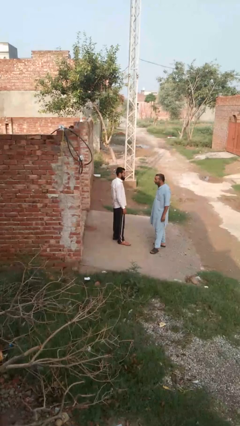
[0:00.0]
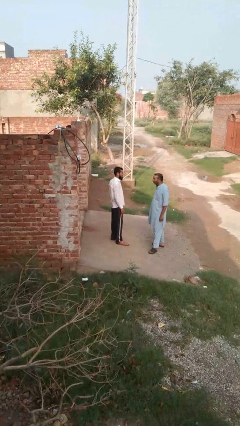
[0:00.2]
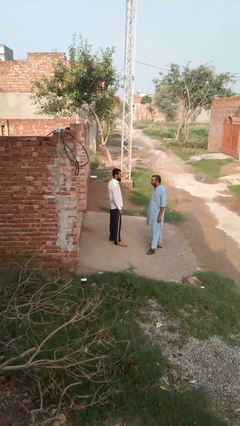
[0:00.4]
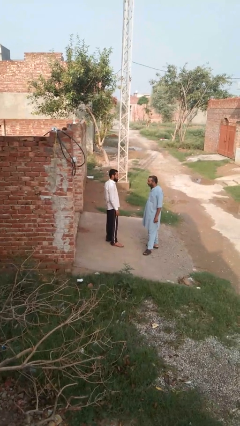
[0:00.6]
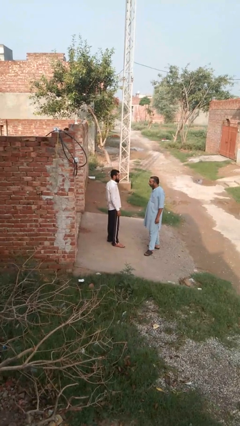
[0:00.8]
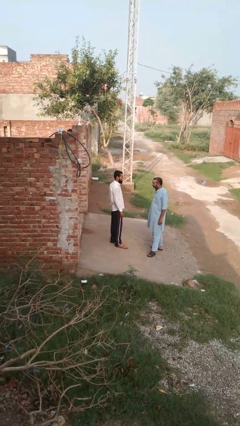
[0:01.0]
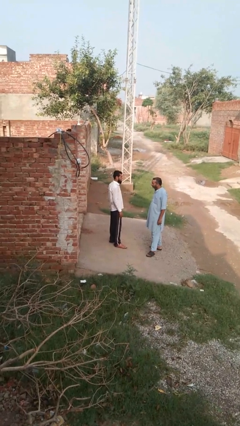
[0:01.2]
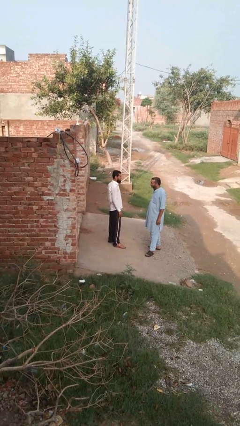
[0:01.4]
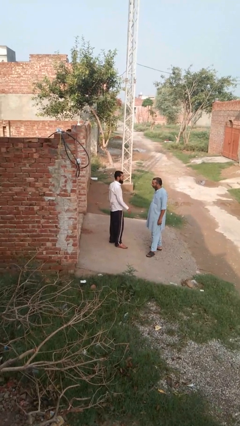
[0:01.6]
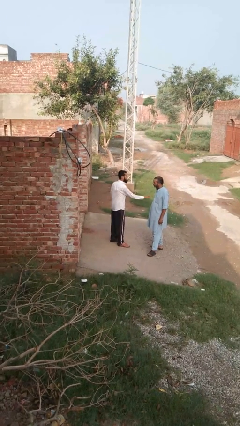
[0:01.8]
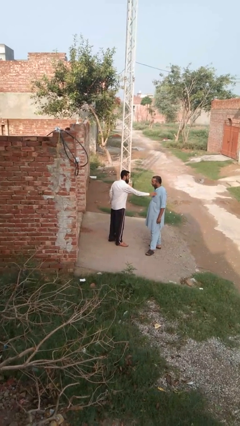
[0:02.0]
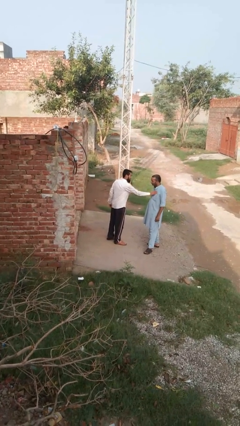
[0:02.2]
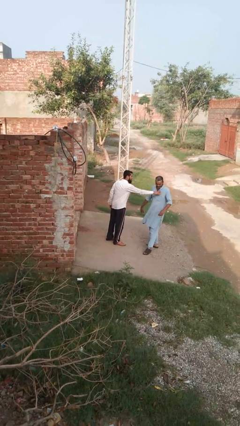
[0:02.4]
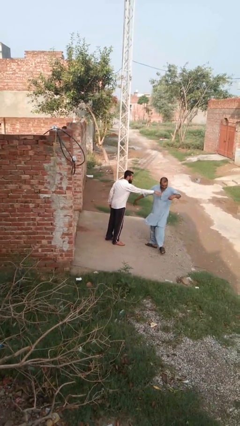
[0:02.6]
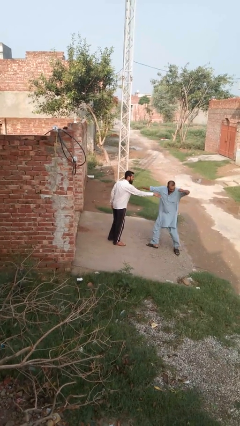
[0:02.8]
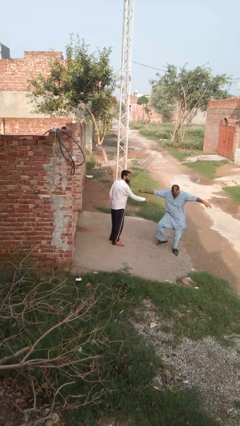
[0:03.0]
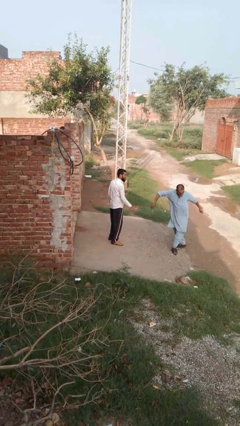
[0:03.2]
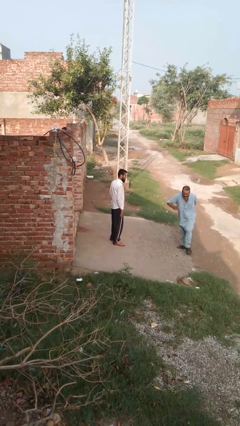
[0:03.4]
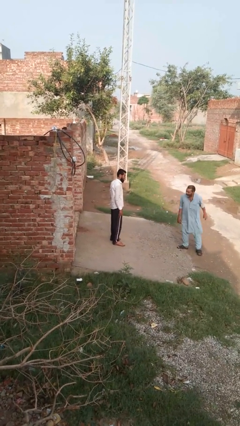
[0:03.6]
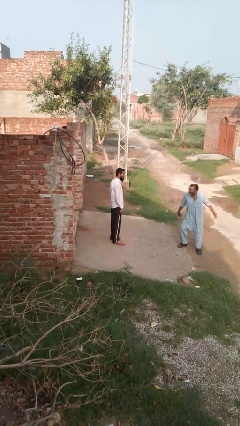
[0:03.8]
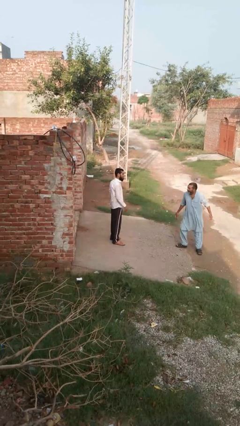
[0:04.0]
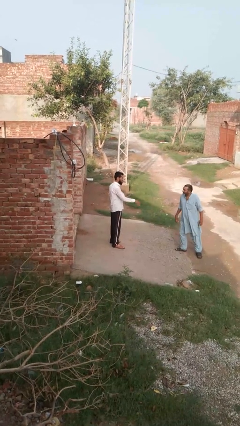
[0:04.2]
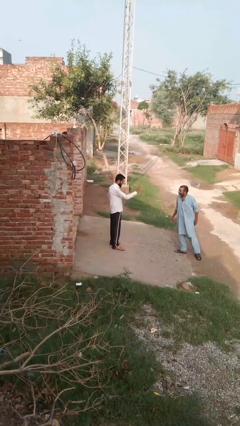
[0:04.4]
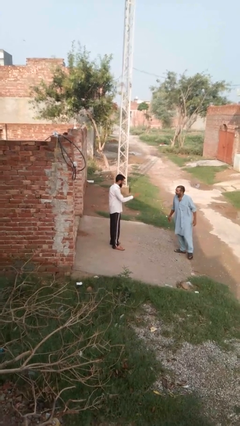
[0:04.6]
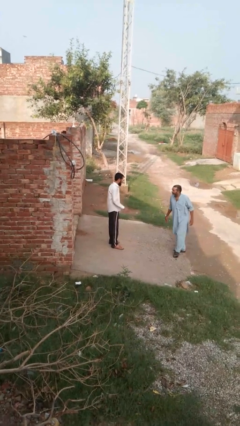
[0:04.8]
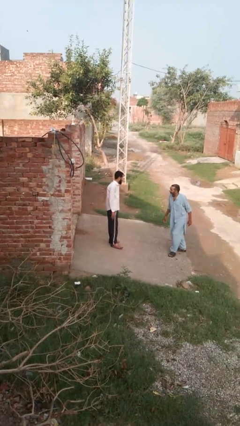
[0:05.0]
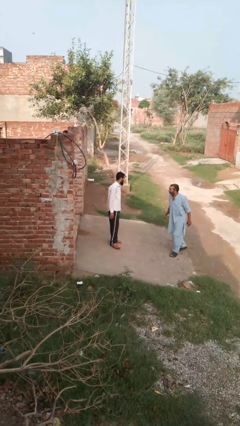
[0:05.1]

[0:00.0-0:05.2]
person shoves person

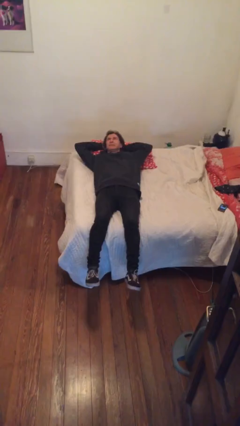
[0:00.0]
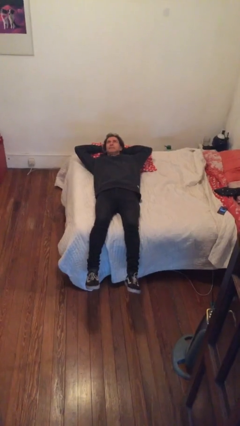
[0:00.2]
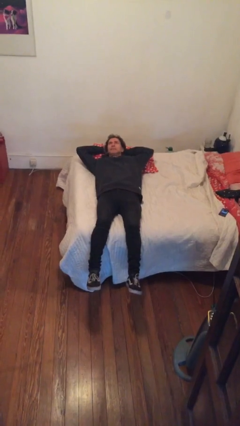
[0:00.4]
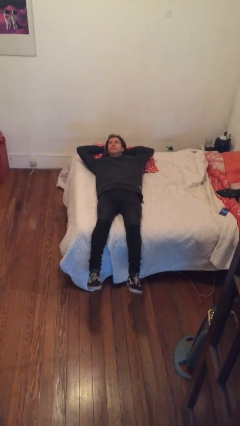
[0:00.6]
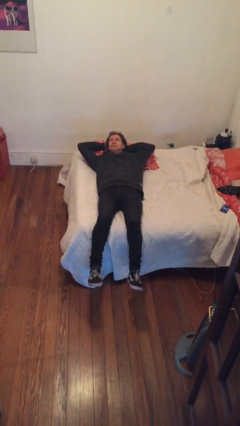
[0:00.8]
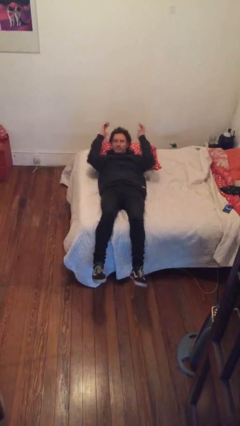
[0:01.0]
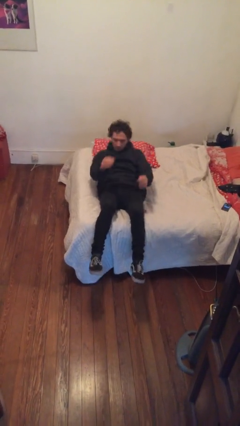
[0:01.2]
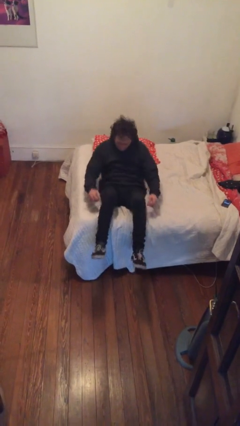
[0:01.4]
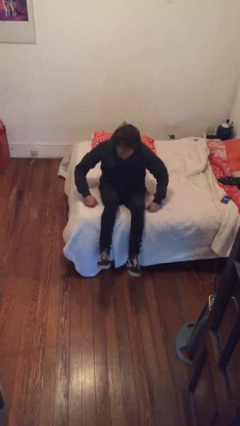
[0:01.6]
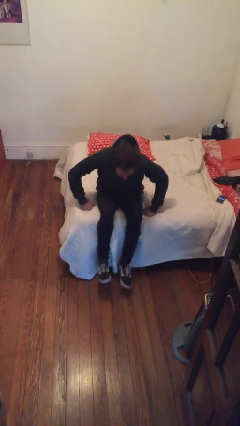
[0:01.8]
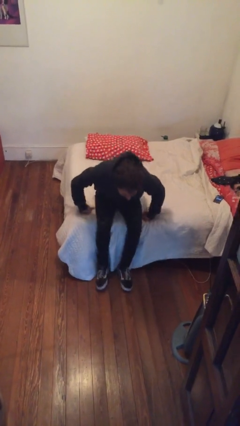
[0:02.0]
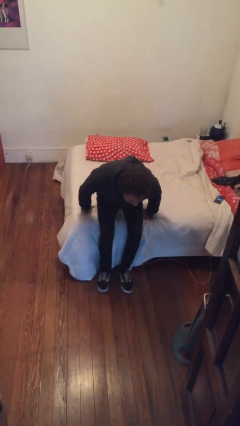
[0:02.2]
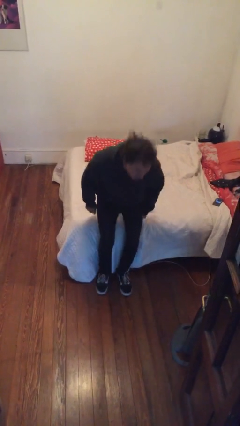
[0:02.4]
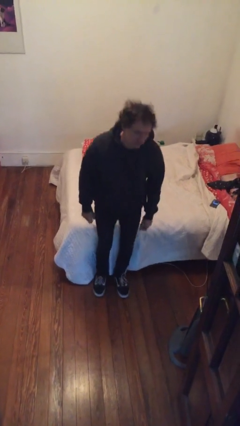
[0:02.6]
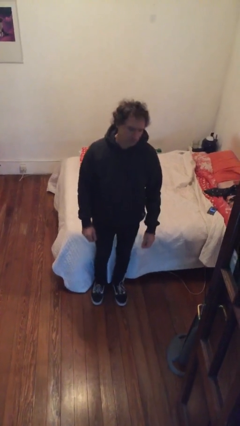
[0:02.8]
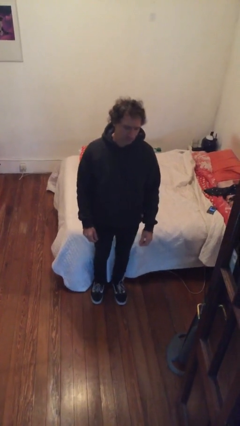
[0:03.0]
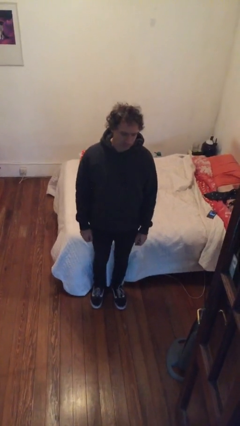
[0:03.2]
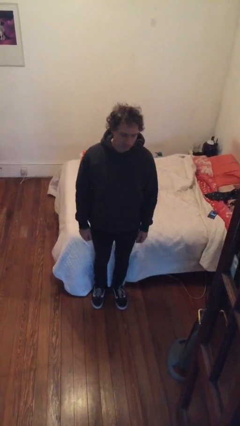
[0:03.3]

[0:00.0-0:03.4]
person stands up

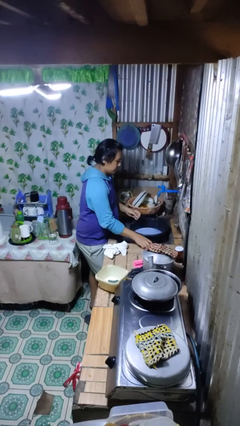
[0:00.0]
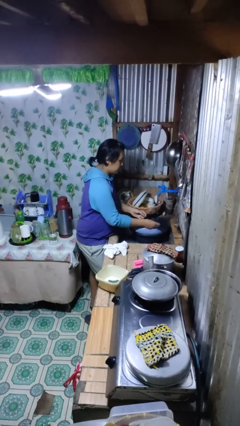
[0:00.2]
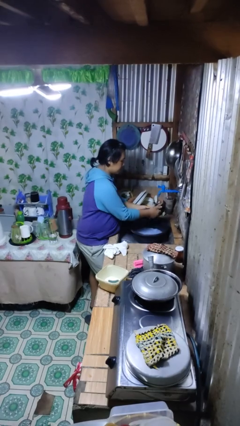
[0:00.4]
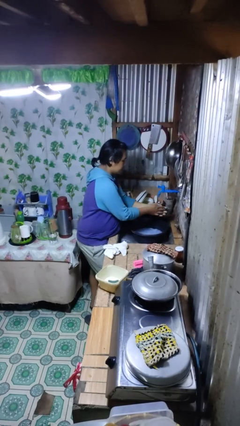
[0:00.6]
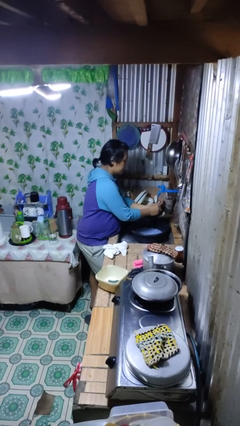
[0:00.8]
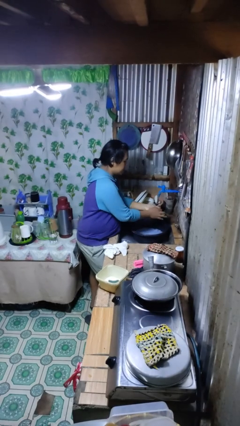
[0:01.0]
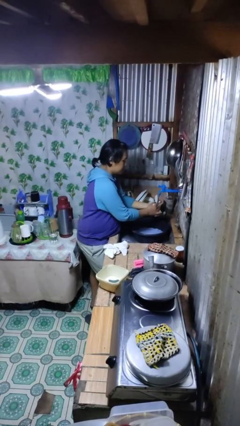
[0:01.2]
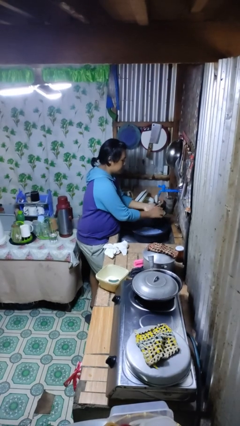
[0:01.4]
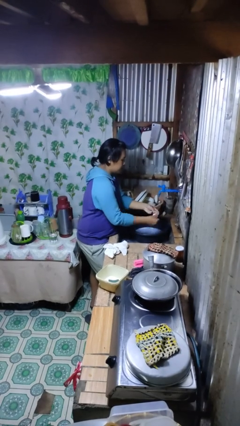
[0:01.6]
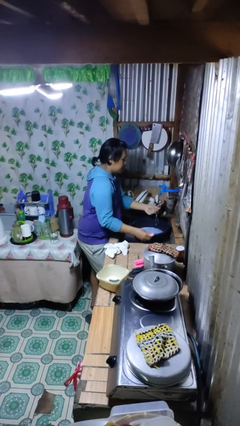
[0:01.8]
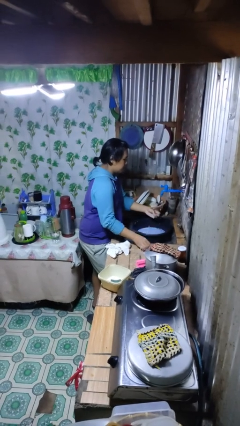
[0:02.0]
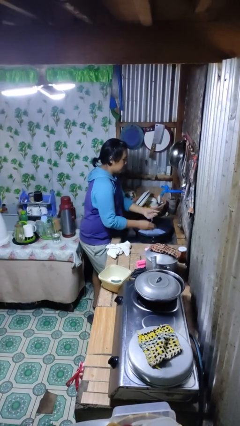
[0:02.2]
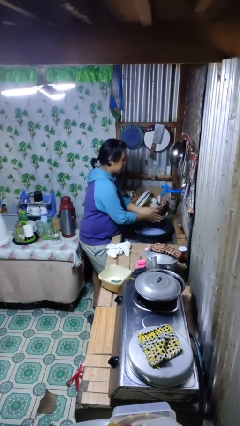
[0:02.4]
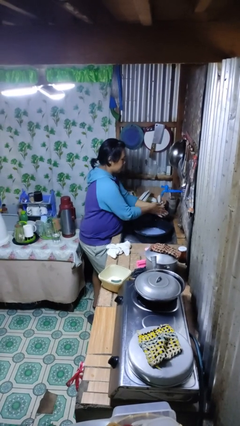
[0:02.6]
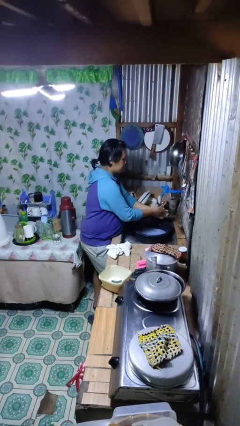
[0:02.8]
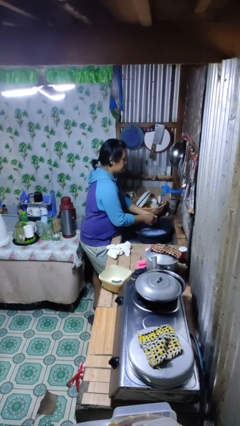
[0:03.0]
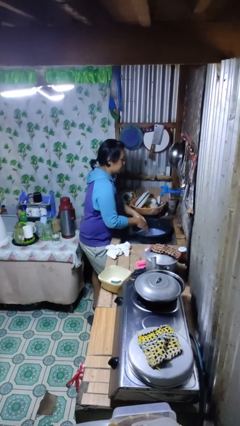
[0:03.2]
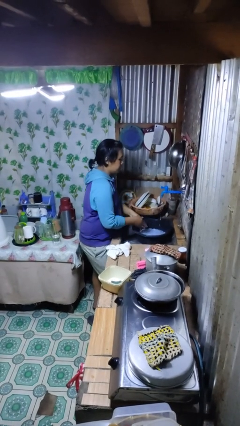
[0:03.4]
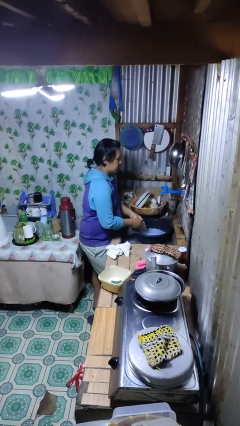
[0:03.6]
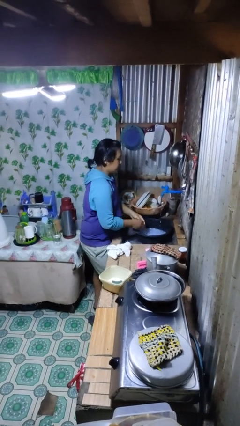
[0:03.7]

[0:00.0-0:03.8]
person washes hands

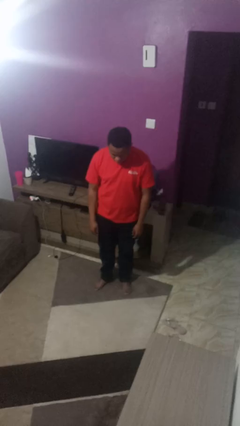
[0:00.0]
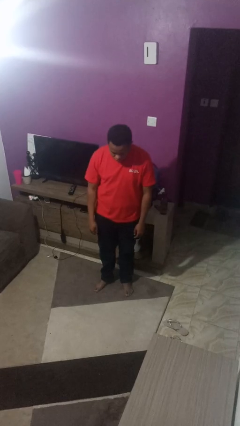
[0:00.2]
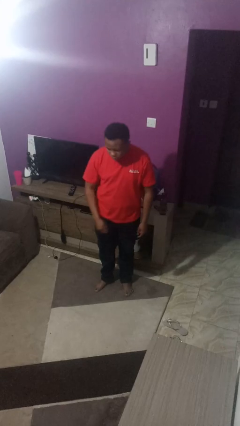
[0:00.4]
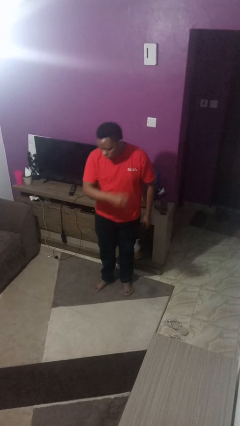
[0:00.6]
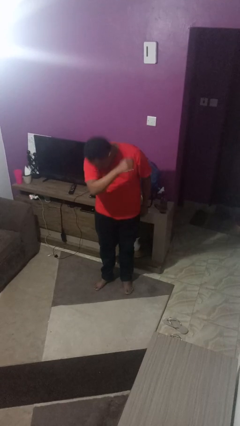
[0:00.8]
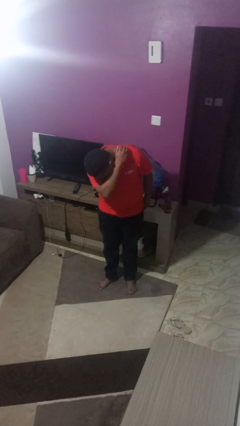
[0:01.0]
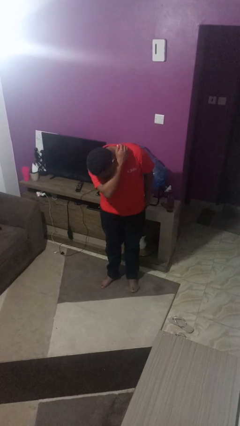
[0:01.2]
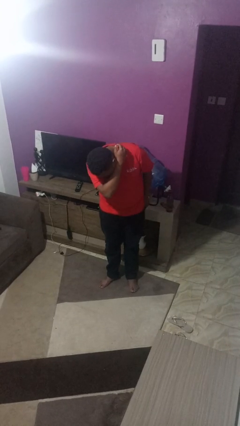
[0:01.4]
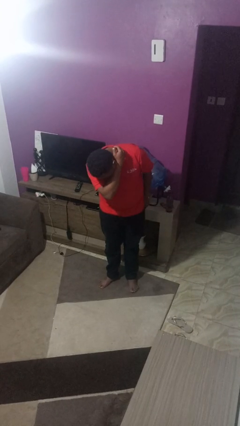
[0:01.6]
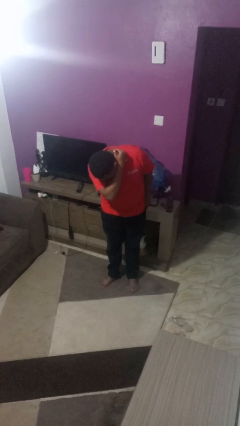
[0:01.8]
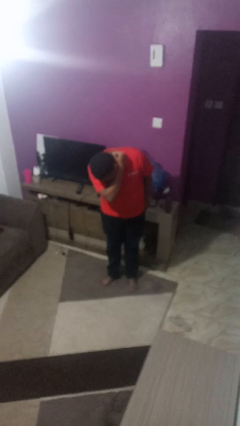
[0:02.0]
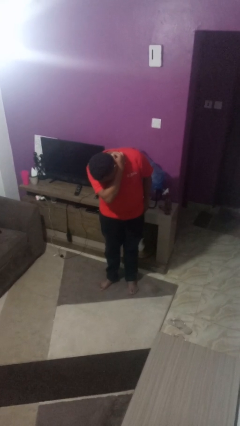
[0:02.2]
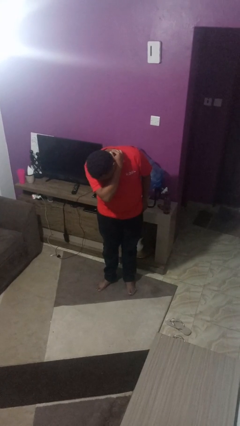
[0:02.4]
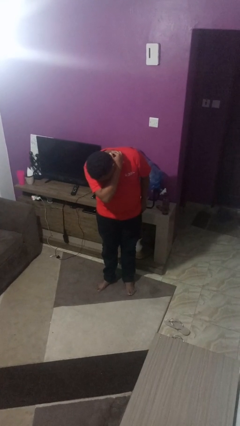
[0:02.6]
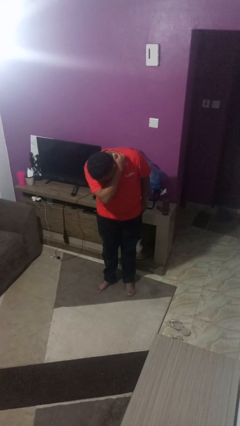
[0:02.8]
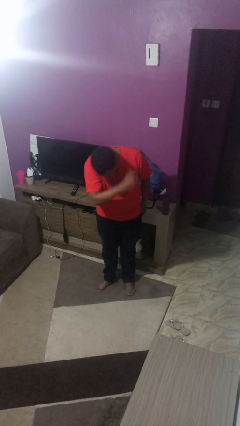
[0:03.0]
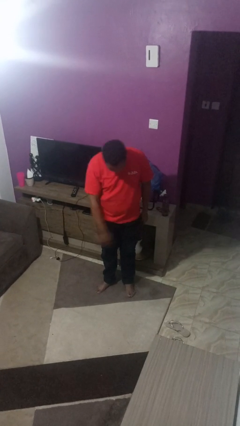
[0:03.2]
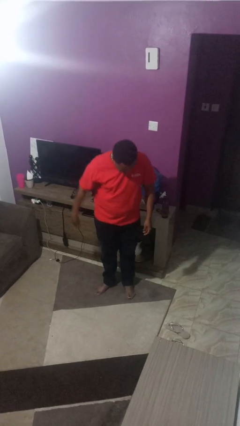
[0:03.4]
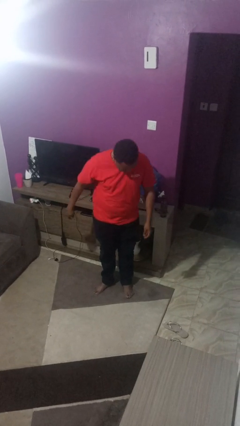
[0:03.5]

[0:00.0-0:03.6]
person sneezes into arm

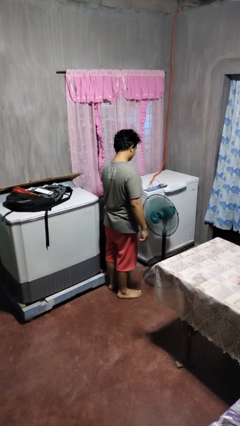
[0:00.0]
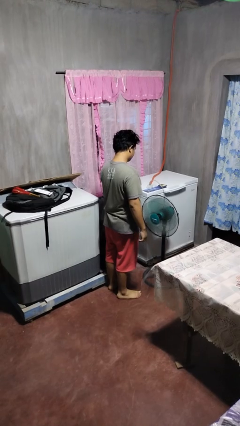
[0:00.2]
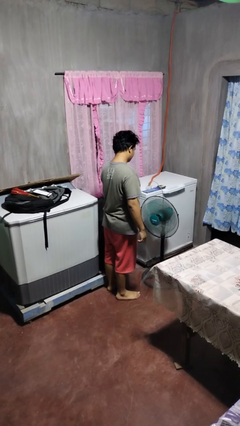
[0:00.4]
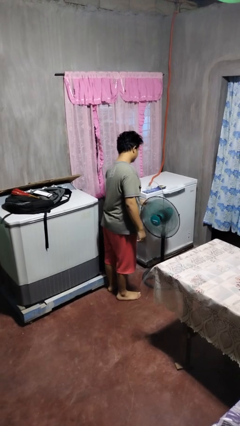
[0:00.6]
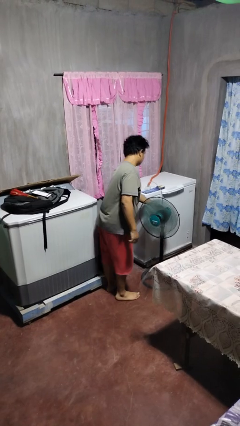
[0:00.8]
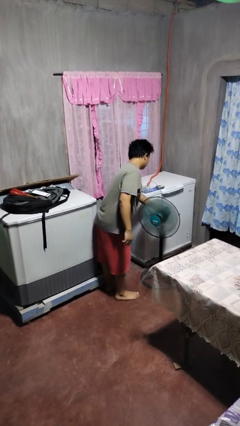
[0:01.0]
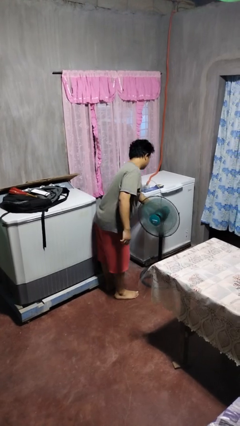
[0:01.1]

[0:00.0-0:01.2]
person turns off fan

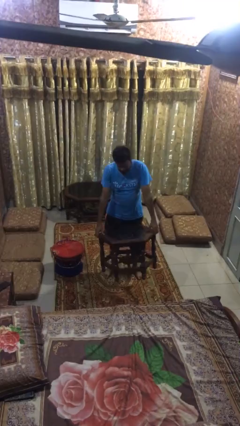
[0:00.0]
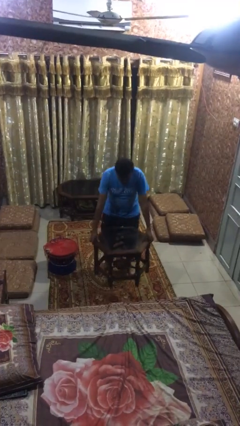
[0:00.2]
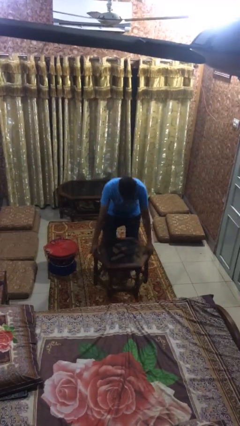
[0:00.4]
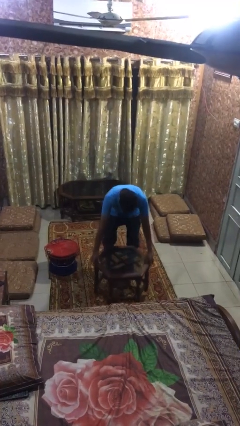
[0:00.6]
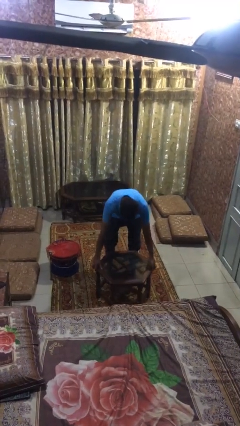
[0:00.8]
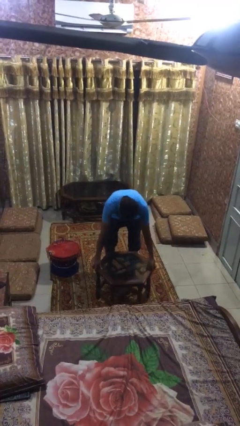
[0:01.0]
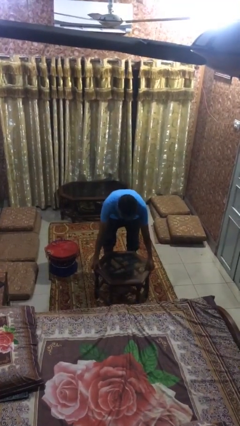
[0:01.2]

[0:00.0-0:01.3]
person puts down object on floor
